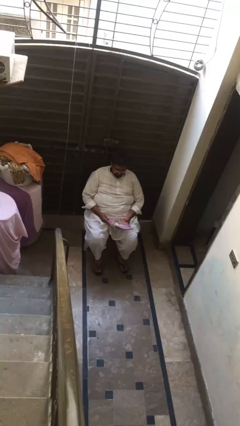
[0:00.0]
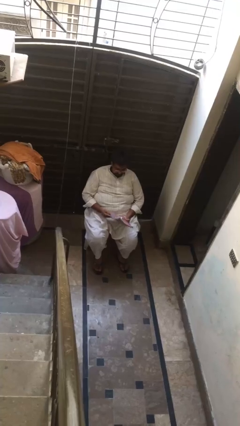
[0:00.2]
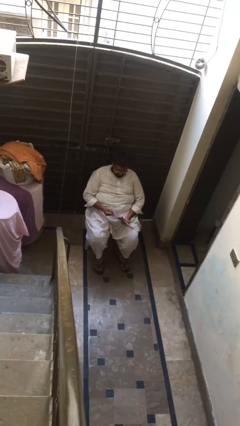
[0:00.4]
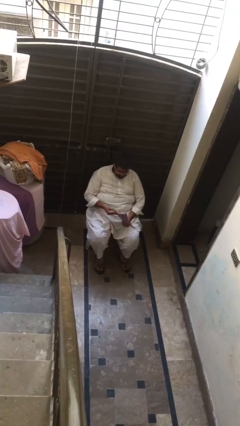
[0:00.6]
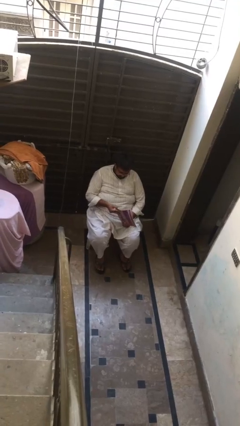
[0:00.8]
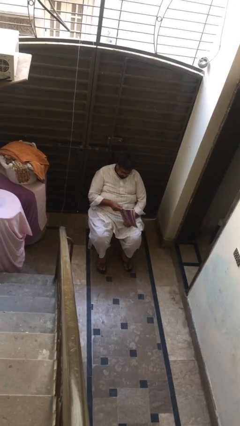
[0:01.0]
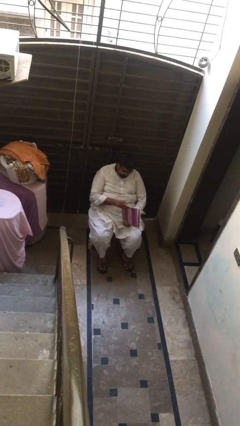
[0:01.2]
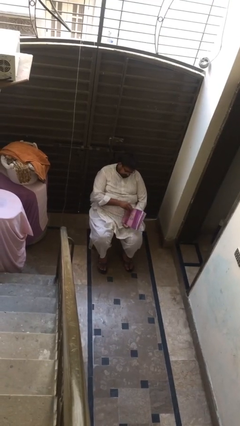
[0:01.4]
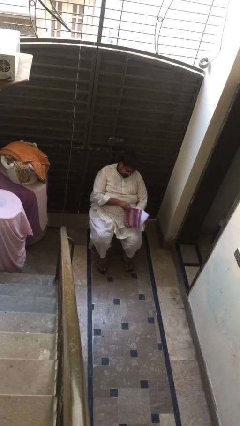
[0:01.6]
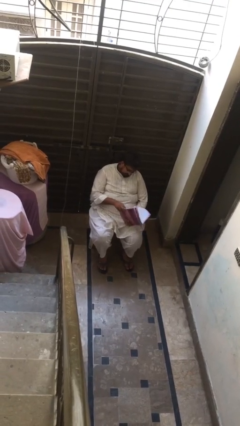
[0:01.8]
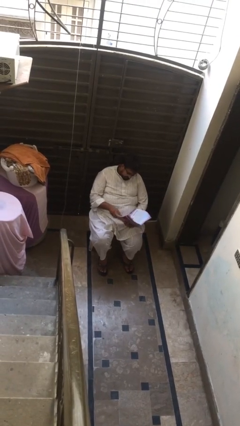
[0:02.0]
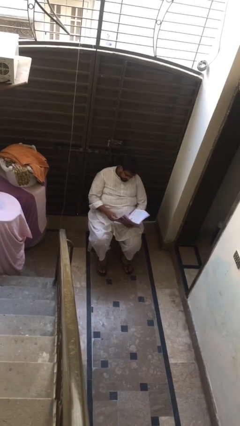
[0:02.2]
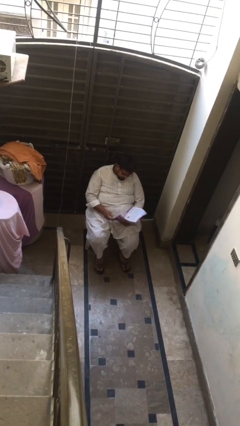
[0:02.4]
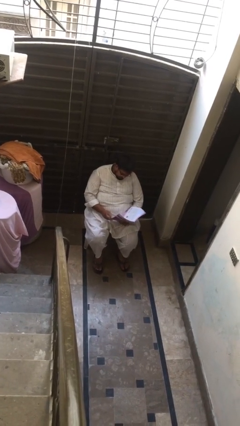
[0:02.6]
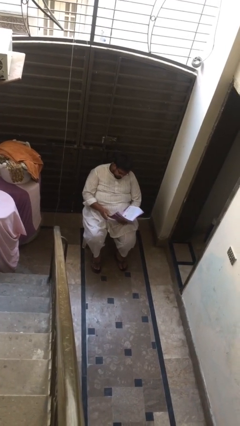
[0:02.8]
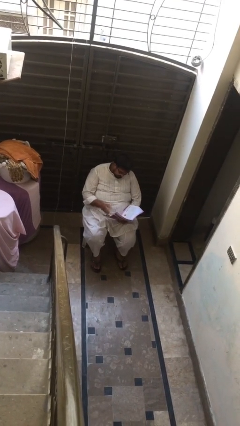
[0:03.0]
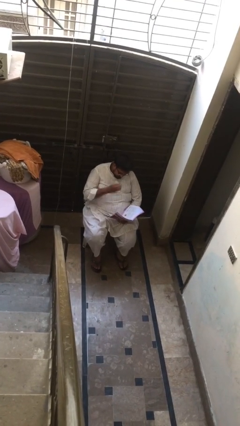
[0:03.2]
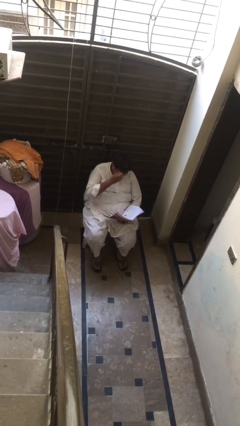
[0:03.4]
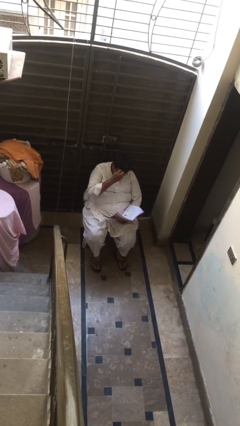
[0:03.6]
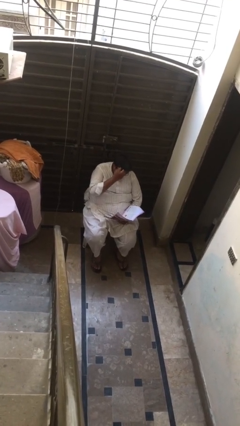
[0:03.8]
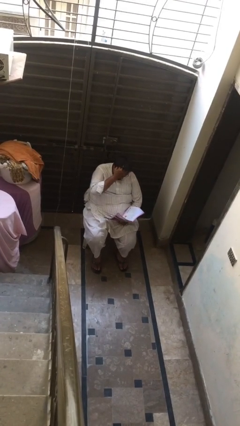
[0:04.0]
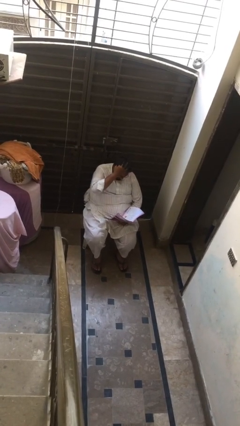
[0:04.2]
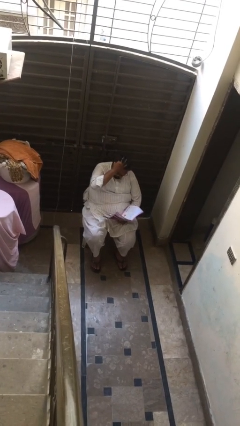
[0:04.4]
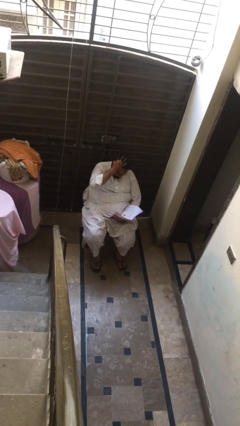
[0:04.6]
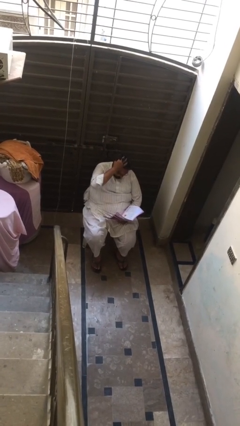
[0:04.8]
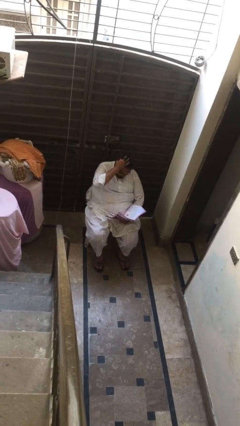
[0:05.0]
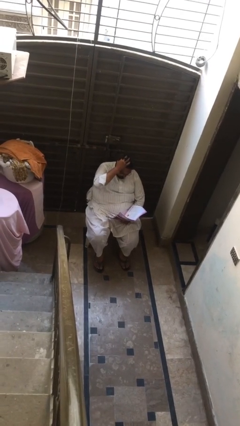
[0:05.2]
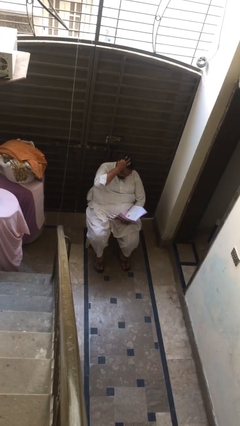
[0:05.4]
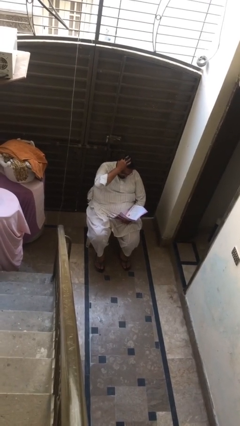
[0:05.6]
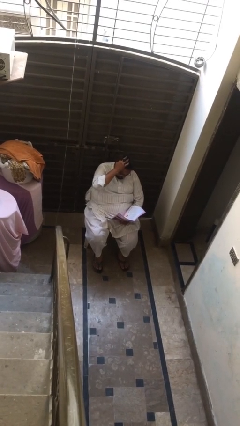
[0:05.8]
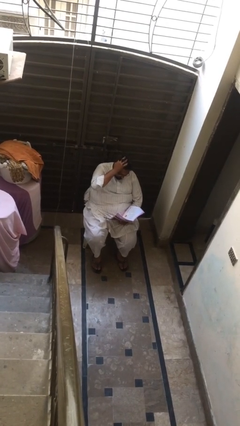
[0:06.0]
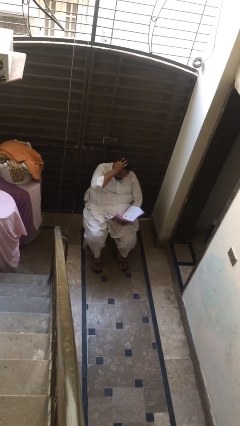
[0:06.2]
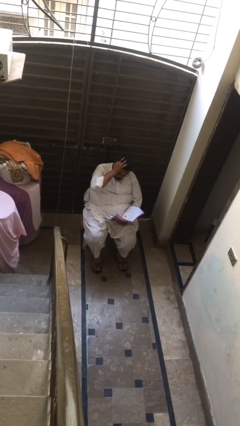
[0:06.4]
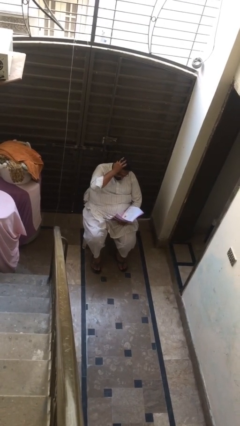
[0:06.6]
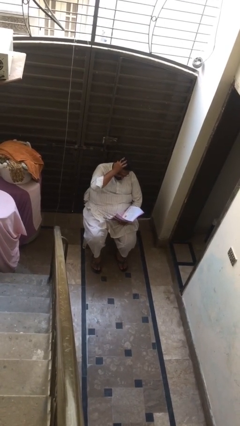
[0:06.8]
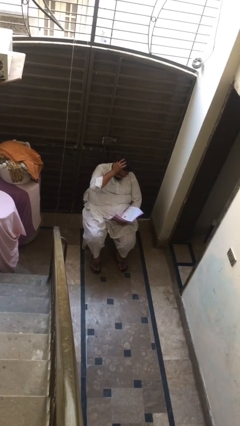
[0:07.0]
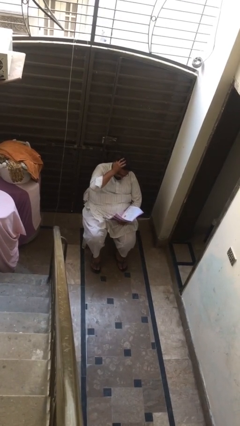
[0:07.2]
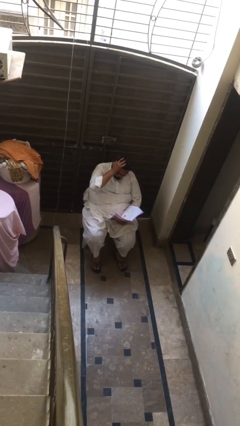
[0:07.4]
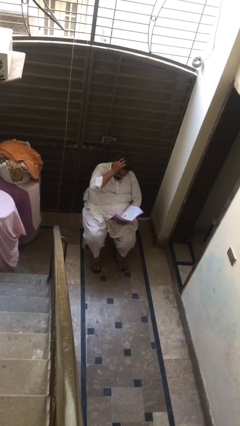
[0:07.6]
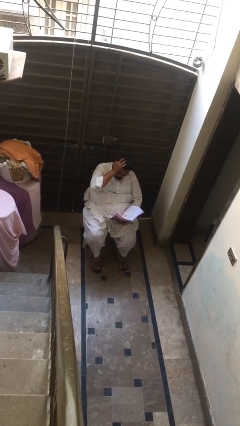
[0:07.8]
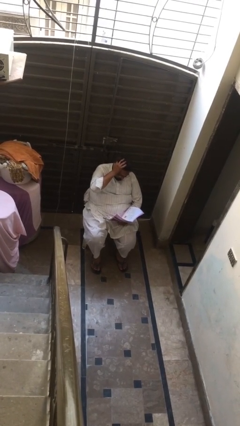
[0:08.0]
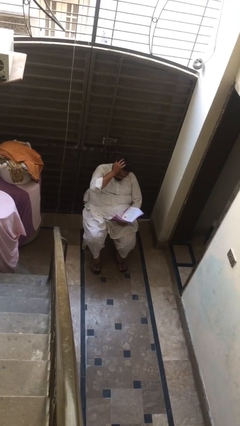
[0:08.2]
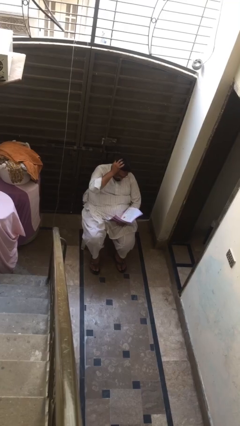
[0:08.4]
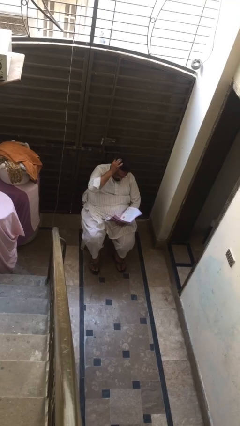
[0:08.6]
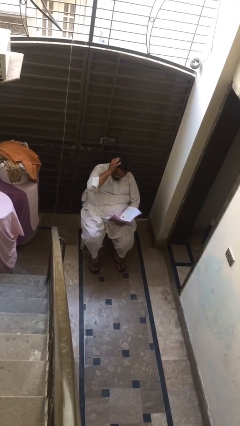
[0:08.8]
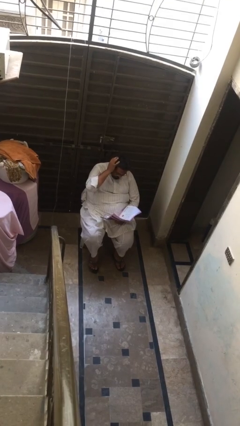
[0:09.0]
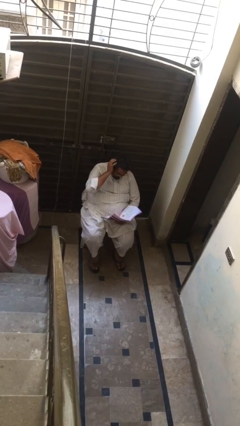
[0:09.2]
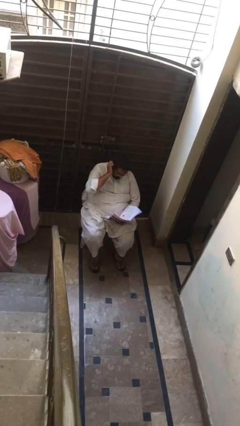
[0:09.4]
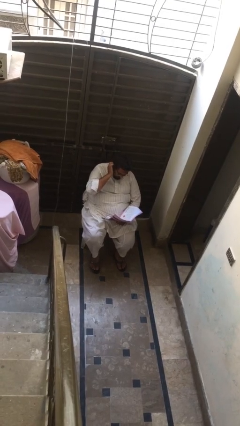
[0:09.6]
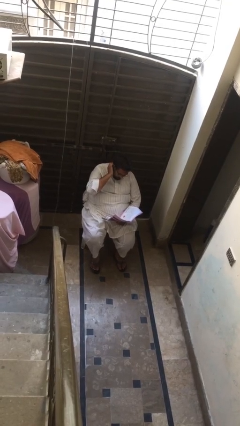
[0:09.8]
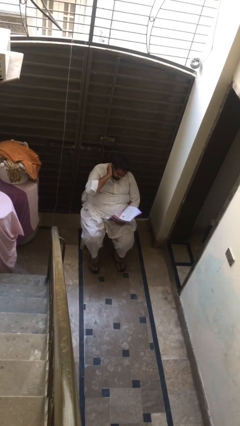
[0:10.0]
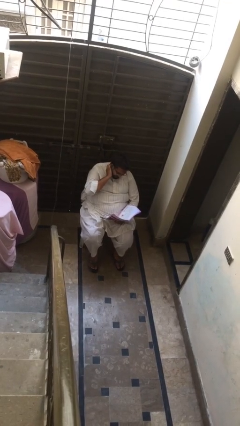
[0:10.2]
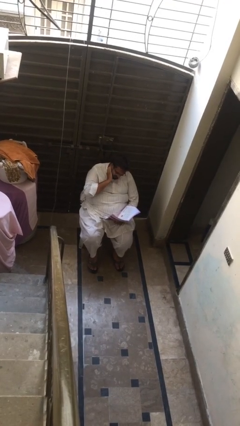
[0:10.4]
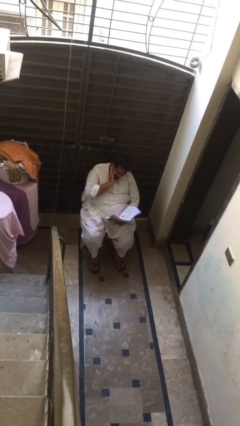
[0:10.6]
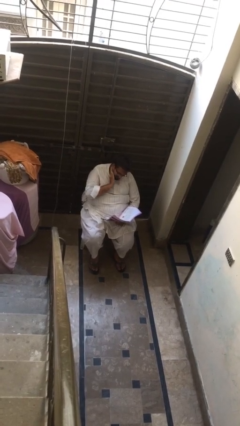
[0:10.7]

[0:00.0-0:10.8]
person reads document

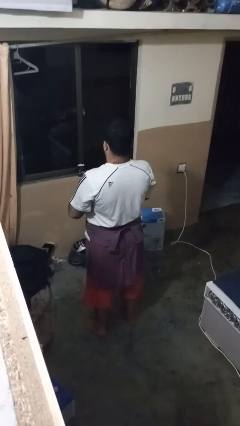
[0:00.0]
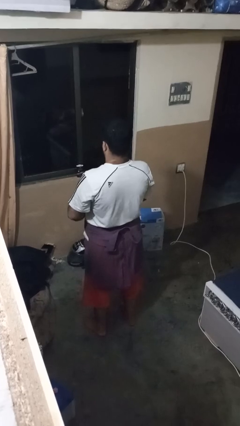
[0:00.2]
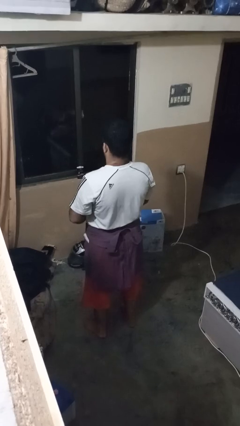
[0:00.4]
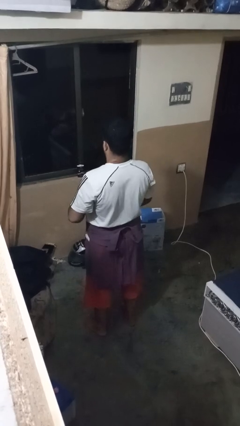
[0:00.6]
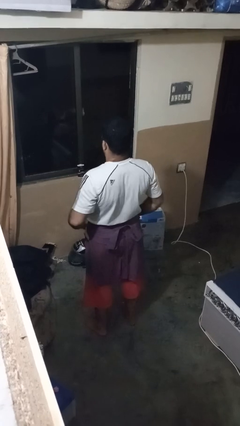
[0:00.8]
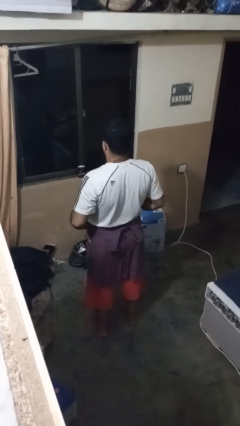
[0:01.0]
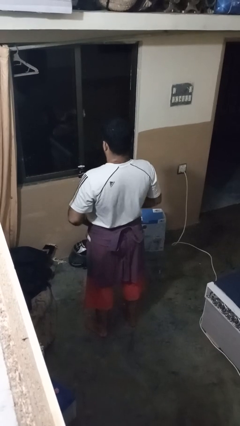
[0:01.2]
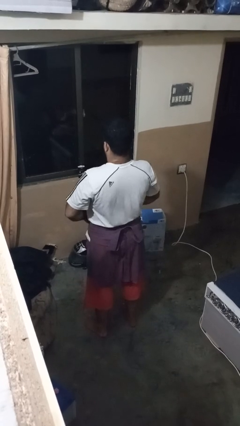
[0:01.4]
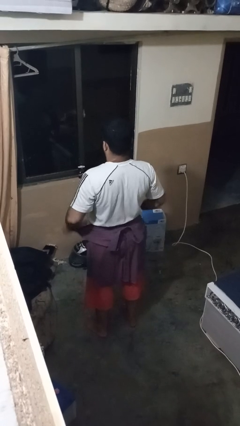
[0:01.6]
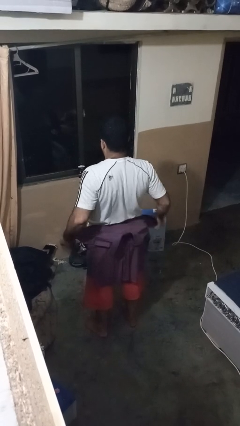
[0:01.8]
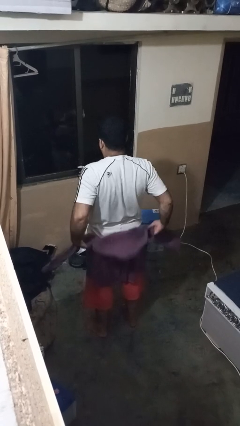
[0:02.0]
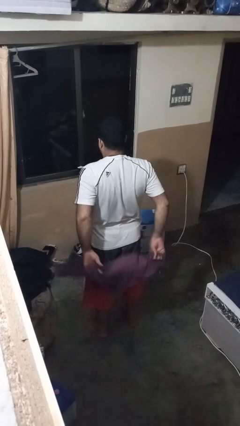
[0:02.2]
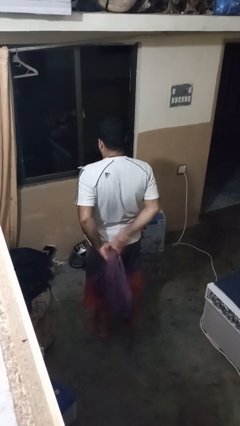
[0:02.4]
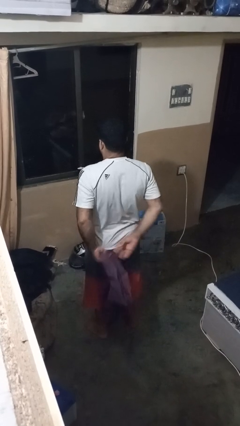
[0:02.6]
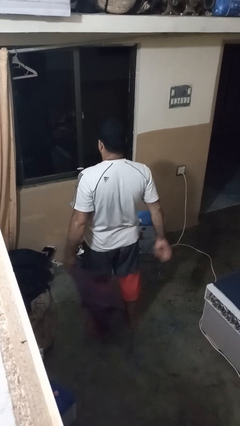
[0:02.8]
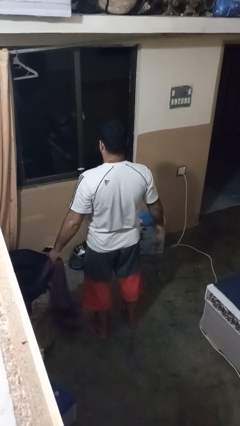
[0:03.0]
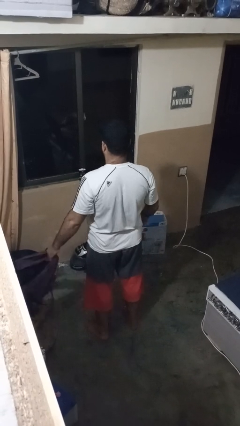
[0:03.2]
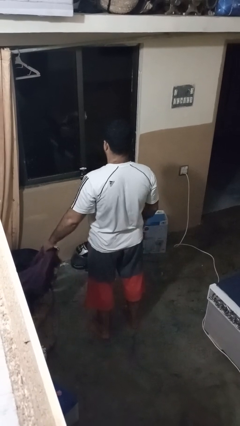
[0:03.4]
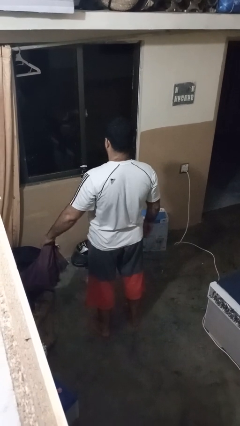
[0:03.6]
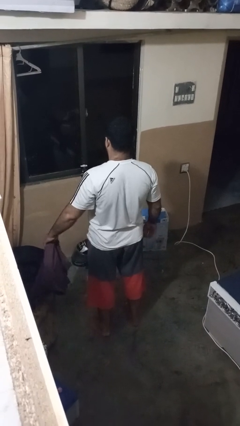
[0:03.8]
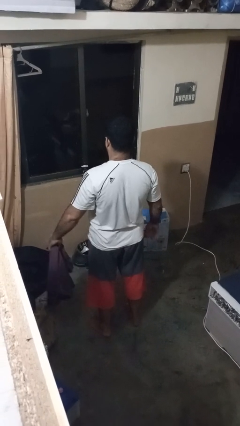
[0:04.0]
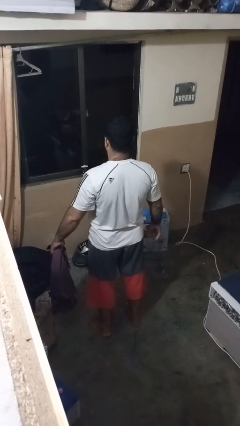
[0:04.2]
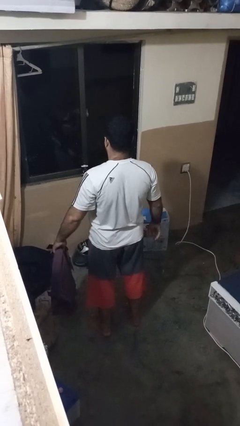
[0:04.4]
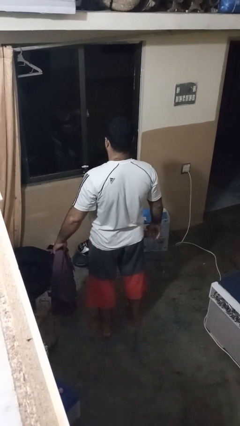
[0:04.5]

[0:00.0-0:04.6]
person unties jacket around waist

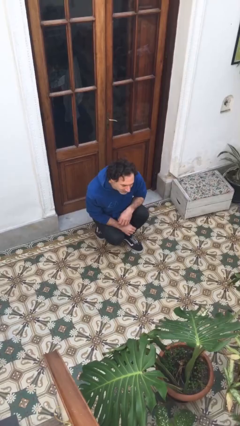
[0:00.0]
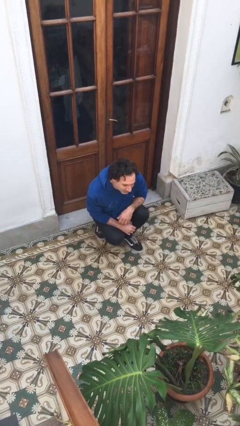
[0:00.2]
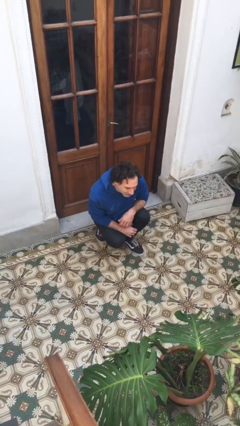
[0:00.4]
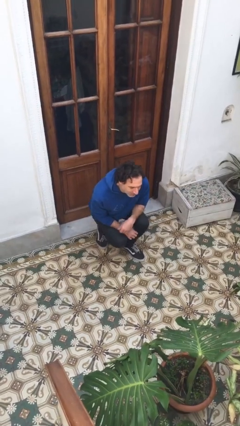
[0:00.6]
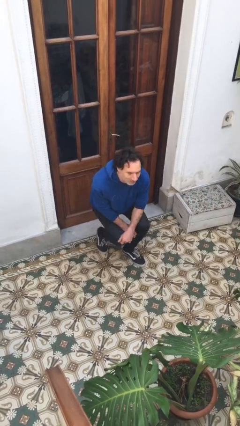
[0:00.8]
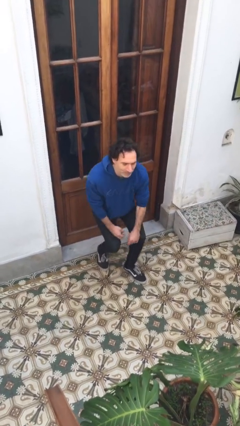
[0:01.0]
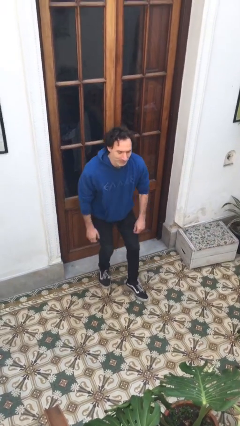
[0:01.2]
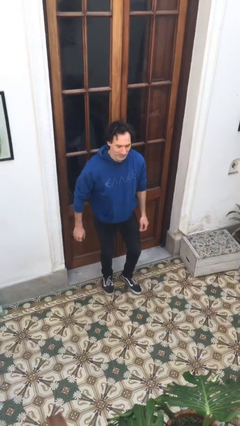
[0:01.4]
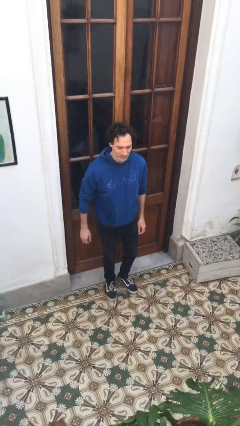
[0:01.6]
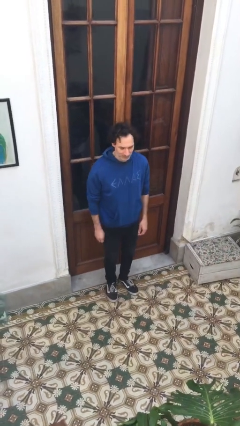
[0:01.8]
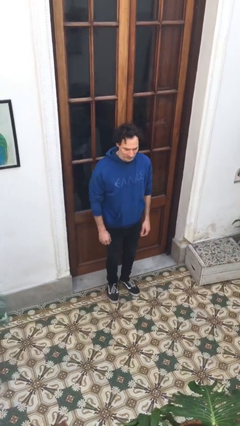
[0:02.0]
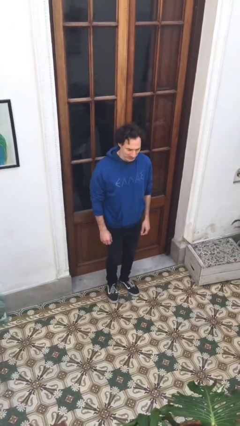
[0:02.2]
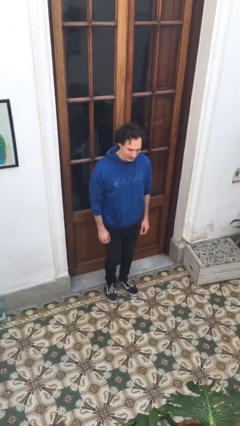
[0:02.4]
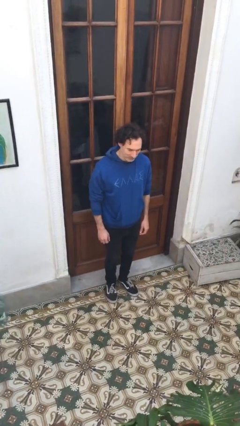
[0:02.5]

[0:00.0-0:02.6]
person stands up
